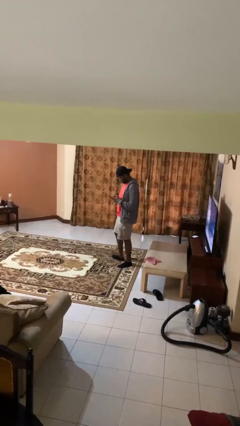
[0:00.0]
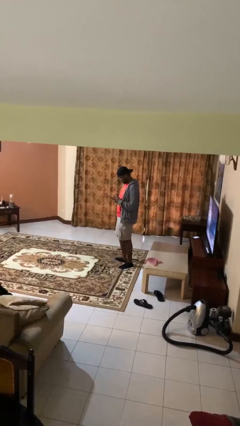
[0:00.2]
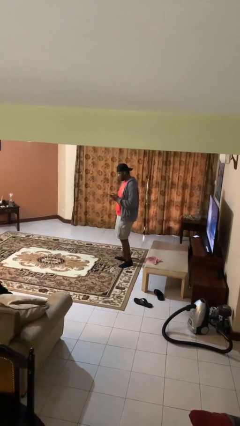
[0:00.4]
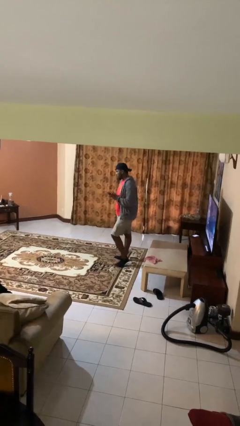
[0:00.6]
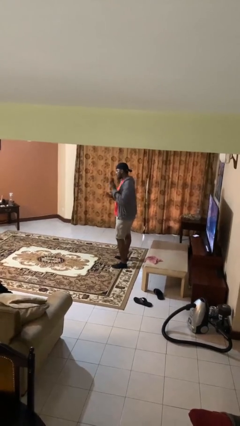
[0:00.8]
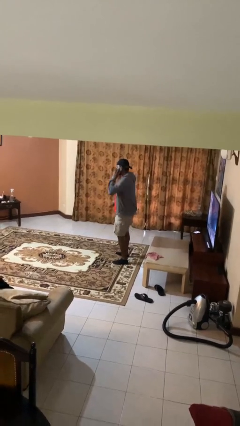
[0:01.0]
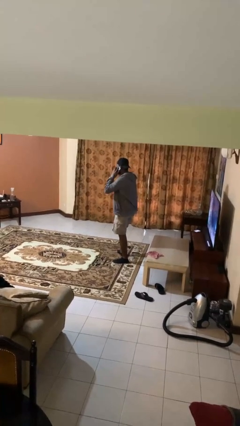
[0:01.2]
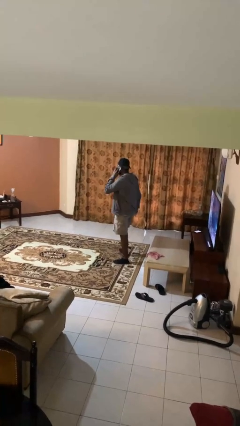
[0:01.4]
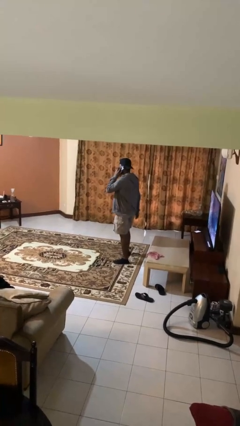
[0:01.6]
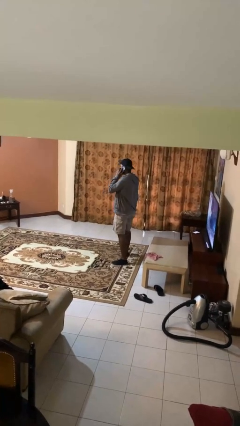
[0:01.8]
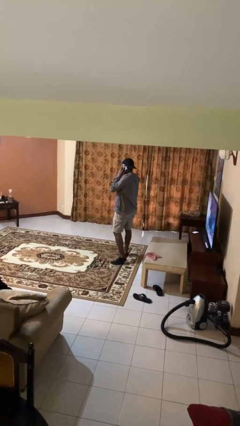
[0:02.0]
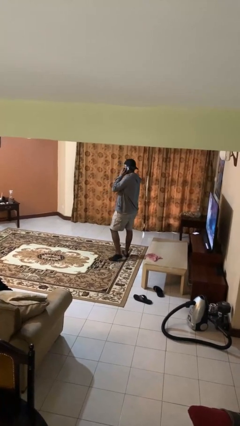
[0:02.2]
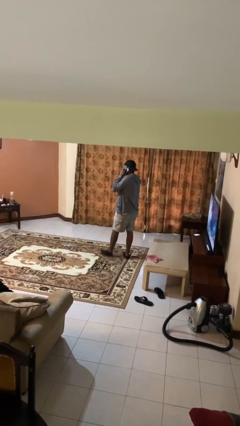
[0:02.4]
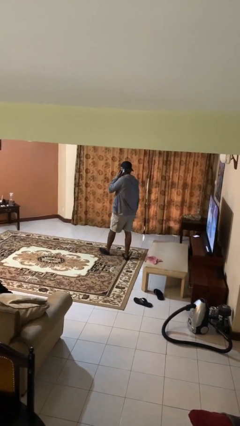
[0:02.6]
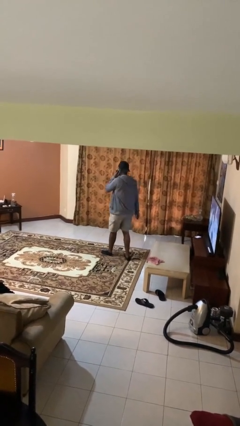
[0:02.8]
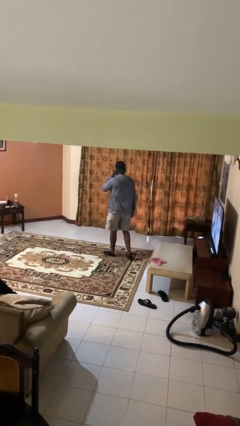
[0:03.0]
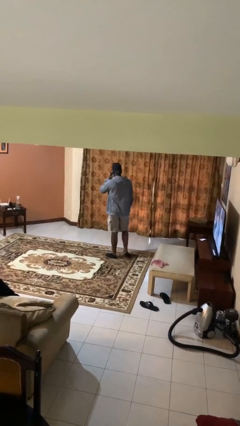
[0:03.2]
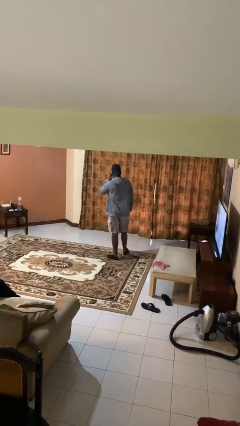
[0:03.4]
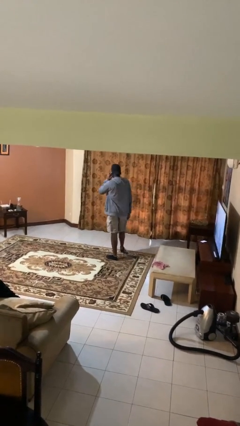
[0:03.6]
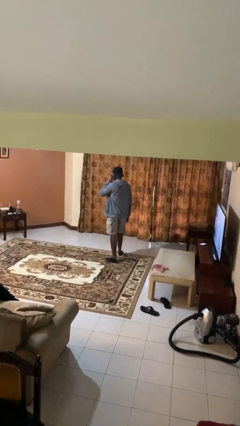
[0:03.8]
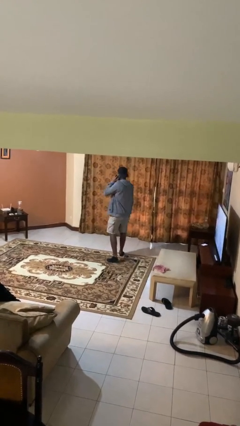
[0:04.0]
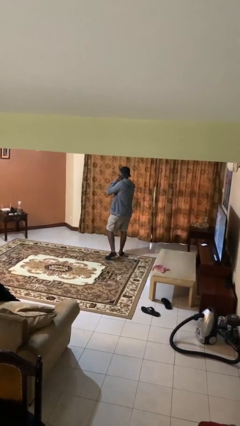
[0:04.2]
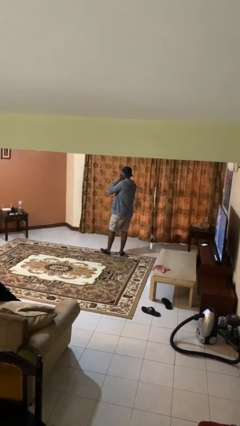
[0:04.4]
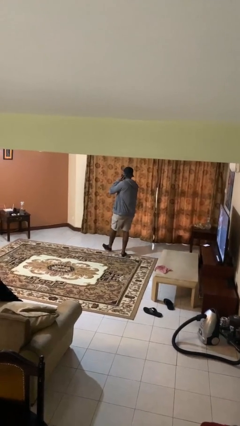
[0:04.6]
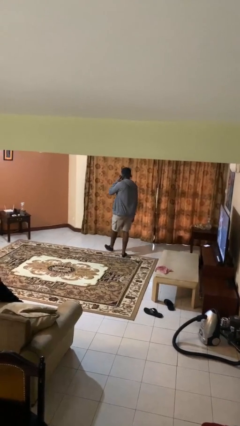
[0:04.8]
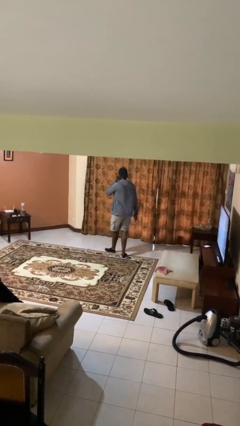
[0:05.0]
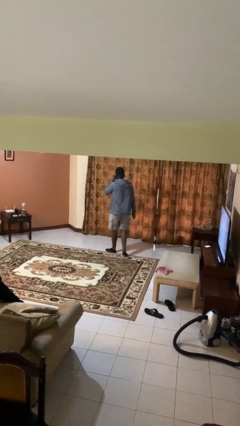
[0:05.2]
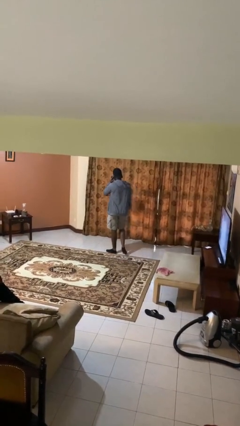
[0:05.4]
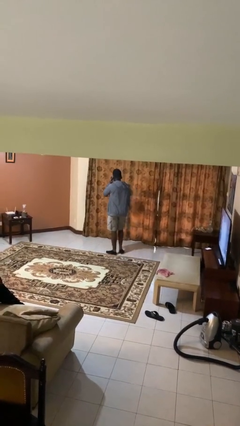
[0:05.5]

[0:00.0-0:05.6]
person talks on phone

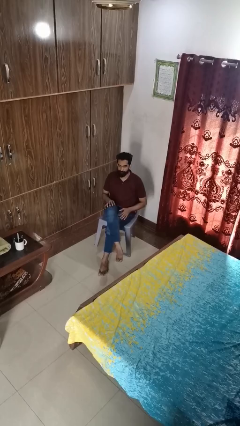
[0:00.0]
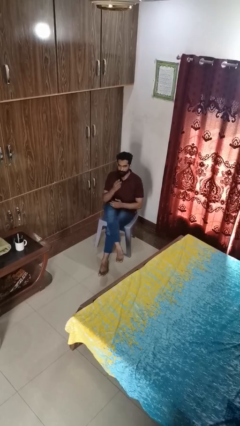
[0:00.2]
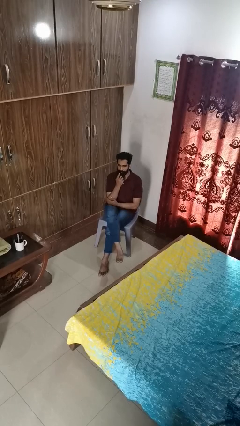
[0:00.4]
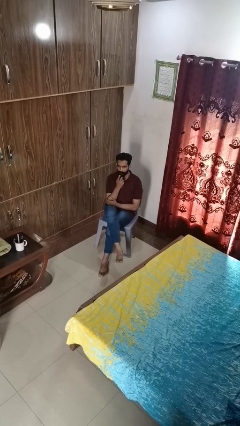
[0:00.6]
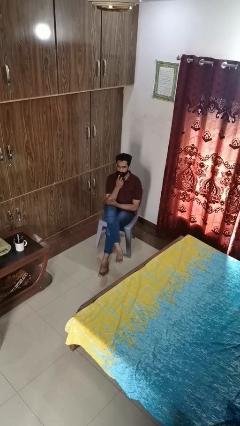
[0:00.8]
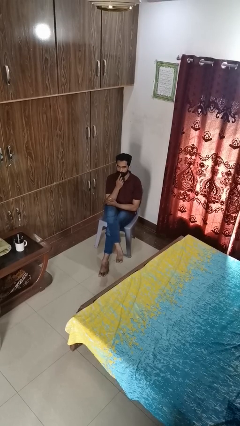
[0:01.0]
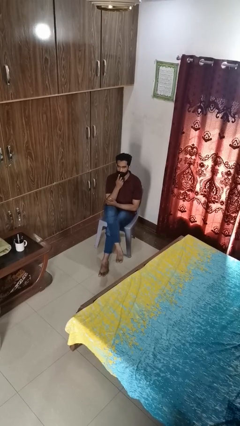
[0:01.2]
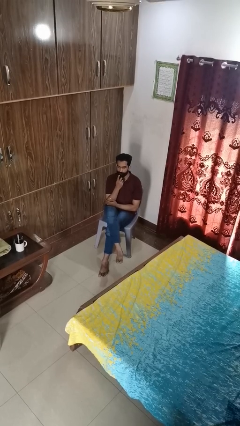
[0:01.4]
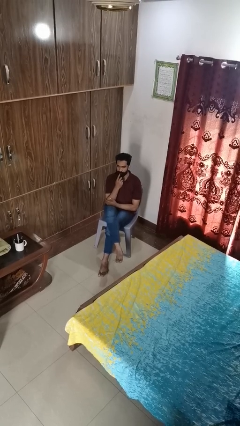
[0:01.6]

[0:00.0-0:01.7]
person strokes chin

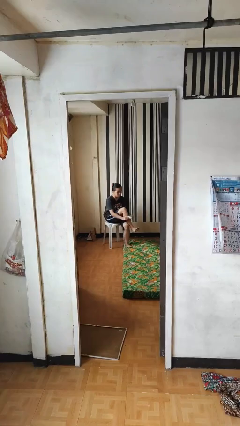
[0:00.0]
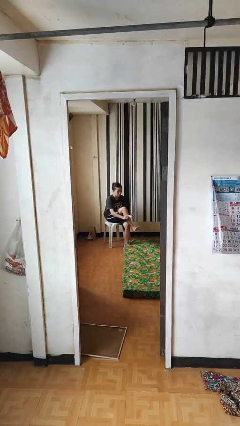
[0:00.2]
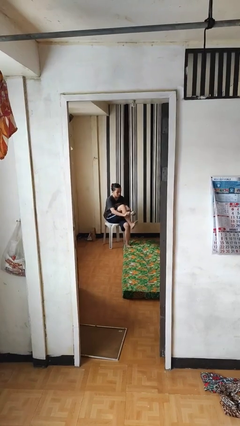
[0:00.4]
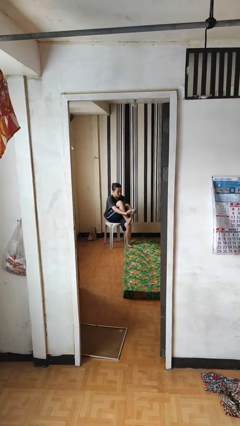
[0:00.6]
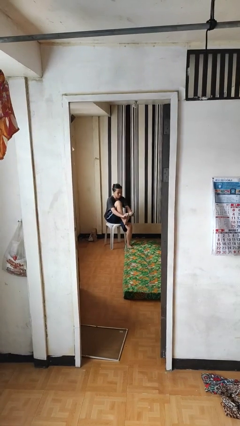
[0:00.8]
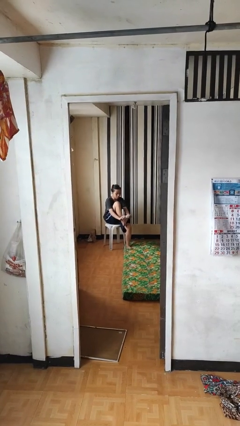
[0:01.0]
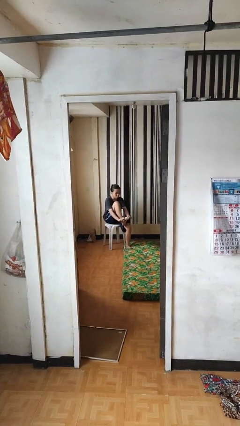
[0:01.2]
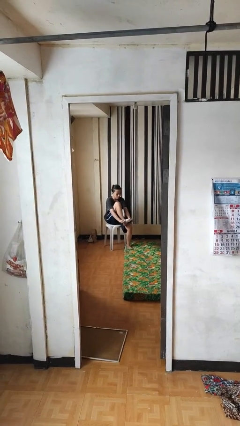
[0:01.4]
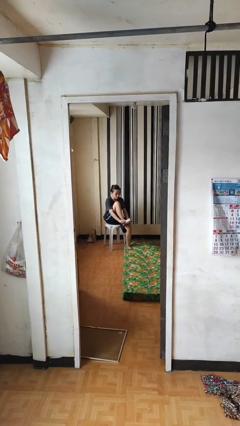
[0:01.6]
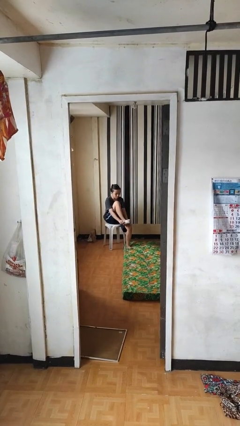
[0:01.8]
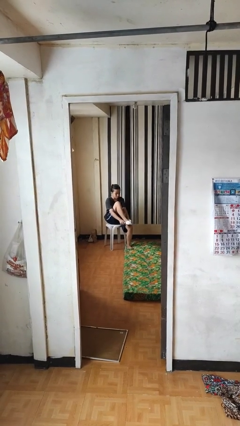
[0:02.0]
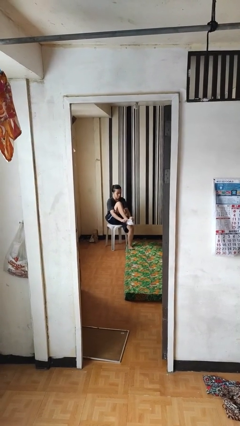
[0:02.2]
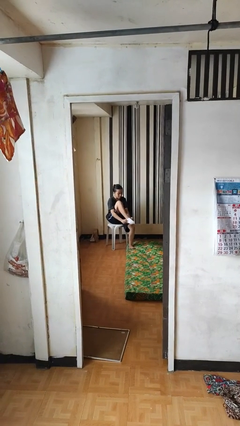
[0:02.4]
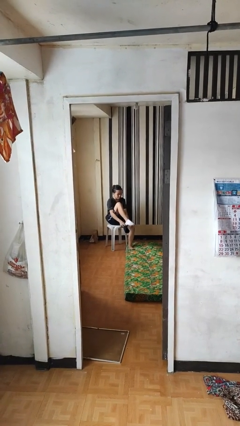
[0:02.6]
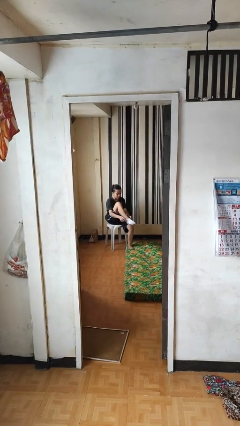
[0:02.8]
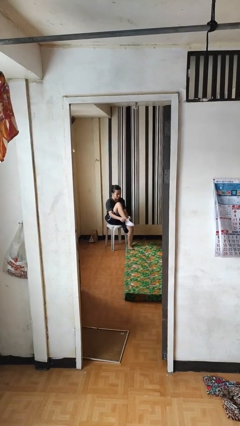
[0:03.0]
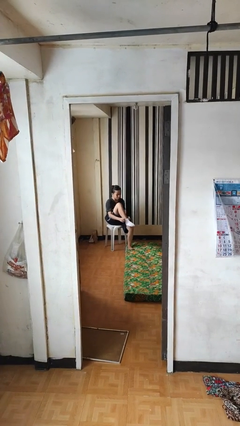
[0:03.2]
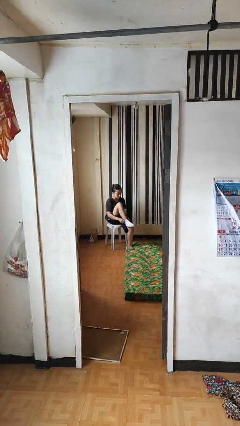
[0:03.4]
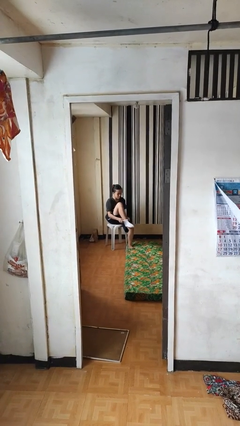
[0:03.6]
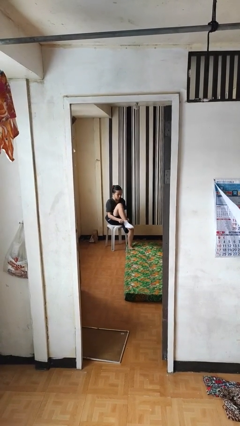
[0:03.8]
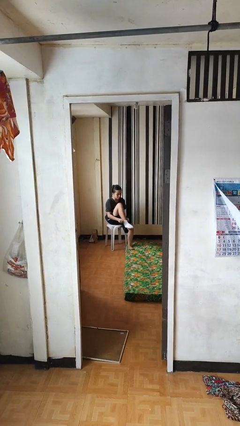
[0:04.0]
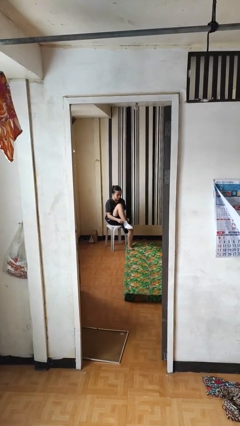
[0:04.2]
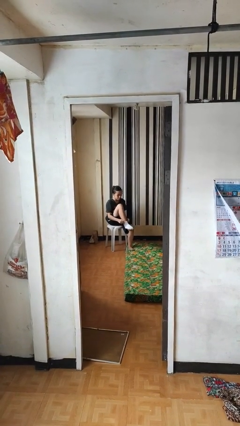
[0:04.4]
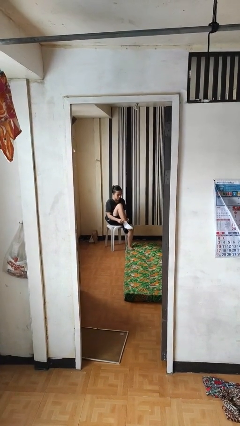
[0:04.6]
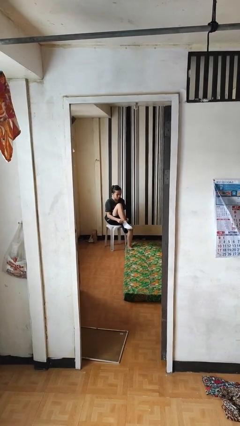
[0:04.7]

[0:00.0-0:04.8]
person puts on socks

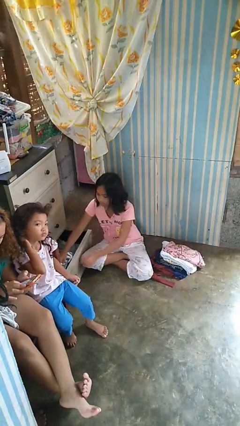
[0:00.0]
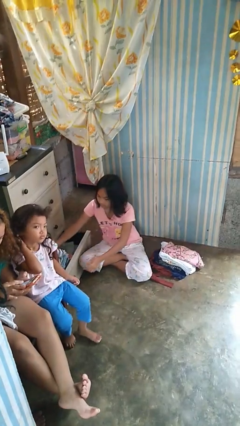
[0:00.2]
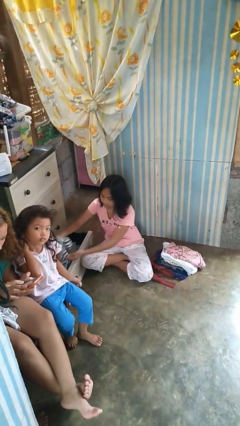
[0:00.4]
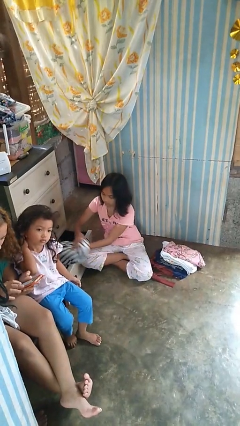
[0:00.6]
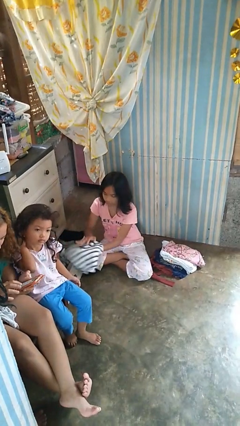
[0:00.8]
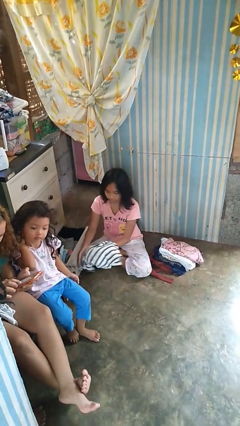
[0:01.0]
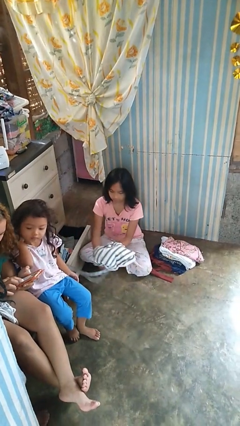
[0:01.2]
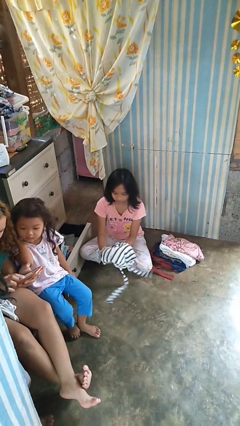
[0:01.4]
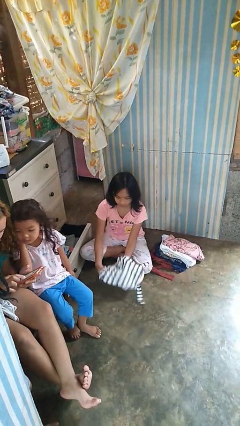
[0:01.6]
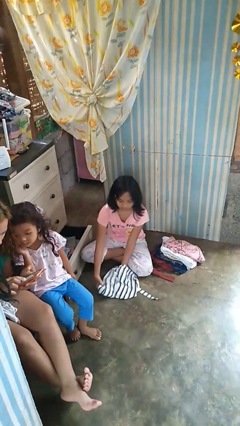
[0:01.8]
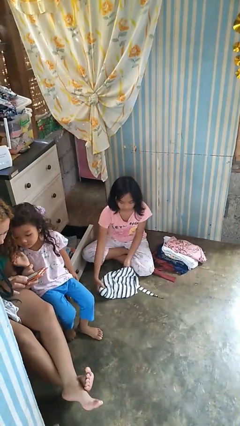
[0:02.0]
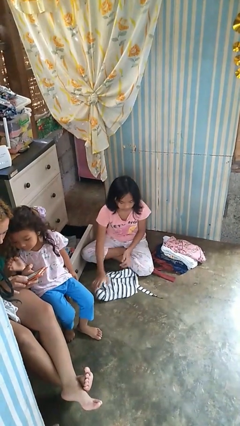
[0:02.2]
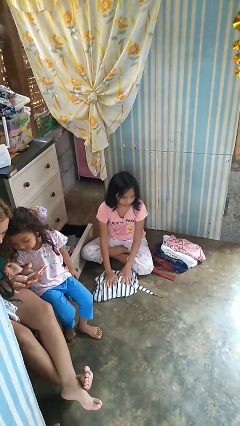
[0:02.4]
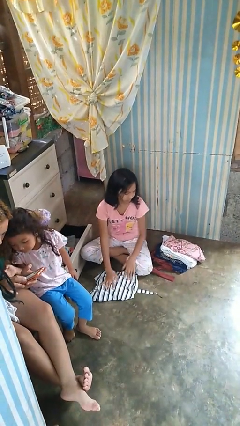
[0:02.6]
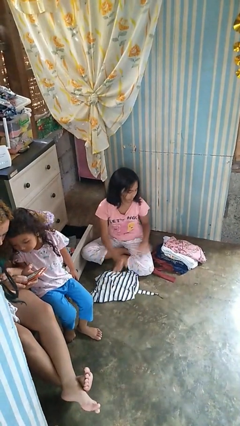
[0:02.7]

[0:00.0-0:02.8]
person takes clothes from dresser

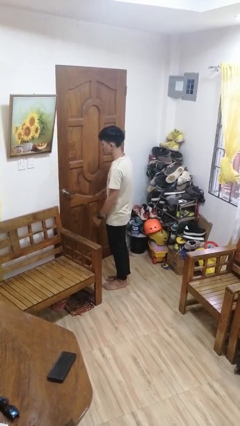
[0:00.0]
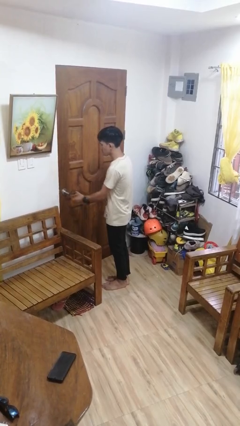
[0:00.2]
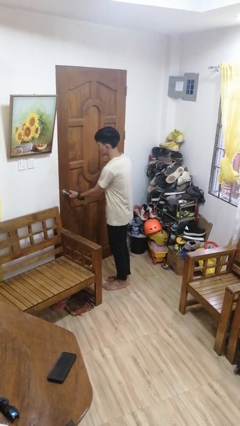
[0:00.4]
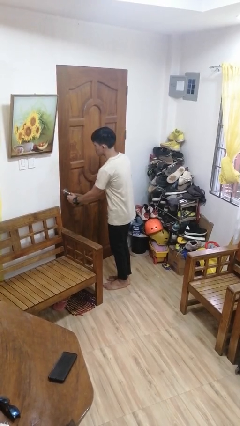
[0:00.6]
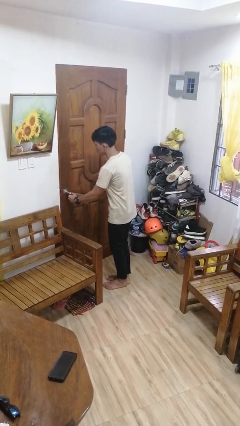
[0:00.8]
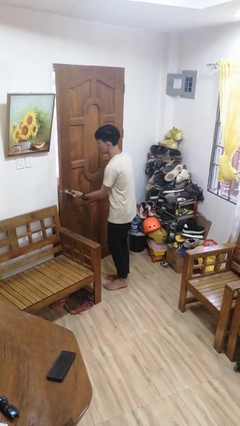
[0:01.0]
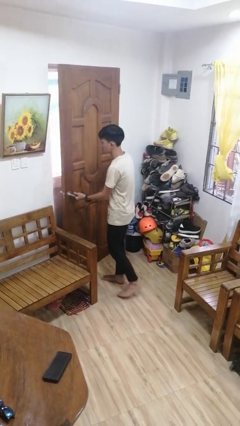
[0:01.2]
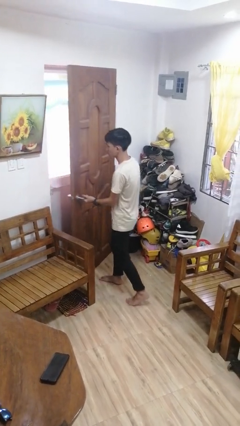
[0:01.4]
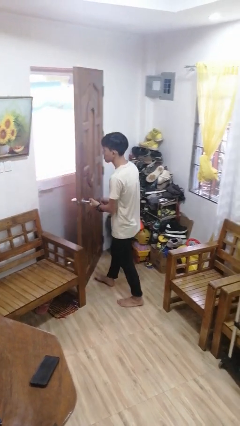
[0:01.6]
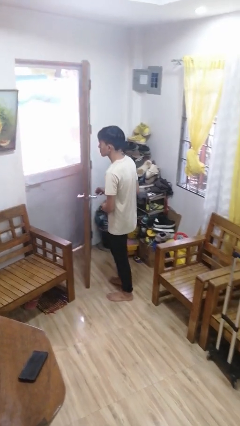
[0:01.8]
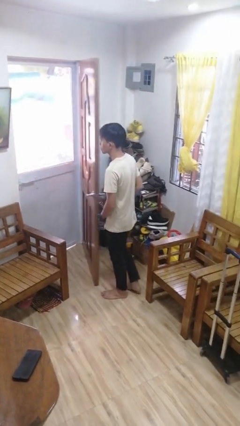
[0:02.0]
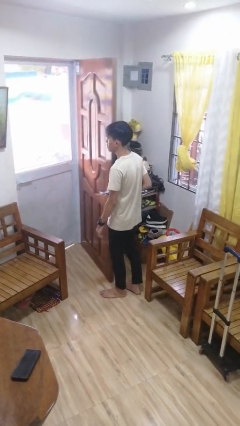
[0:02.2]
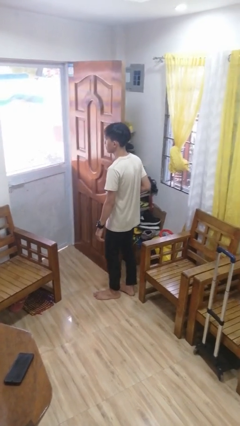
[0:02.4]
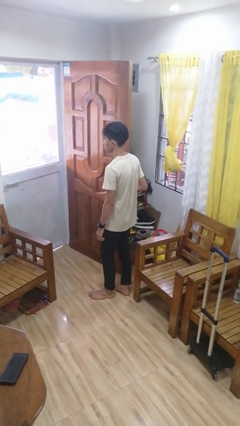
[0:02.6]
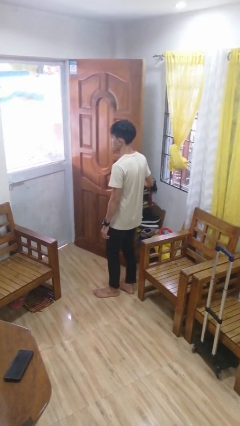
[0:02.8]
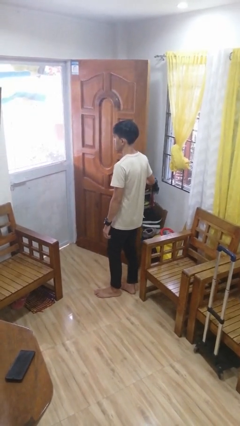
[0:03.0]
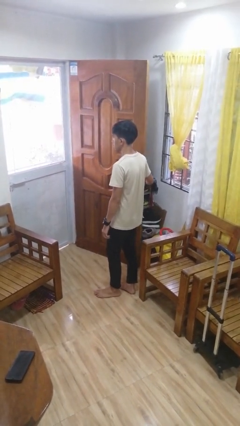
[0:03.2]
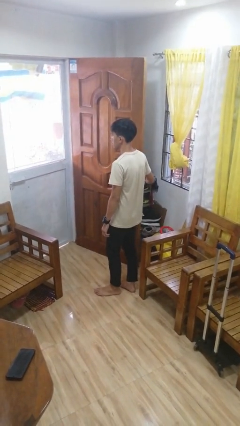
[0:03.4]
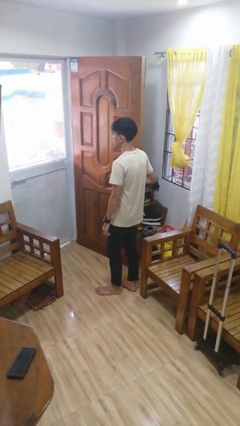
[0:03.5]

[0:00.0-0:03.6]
person opens facility door
